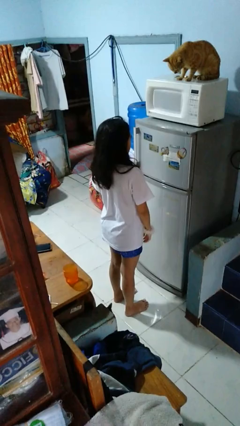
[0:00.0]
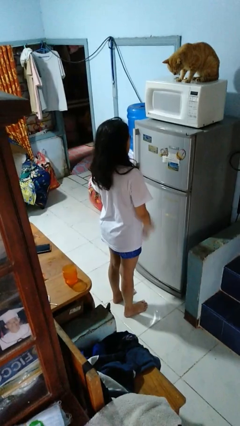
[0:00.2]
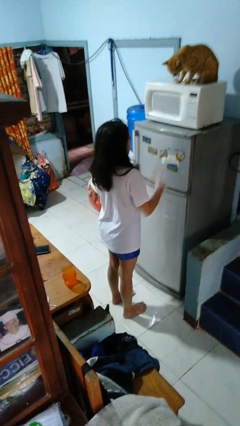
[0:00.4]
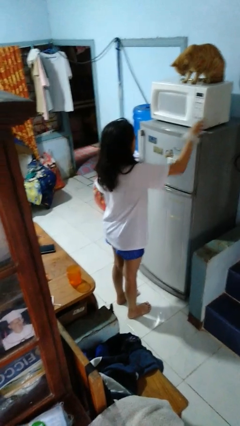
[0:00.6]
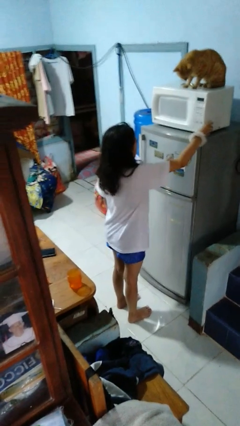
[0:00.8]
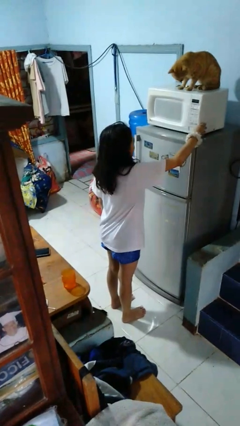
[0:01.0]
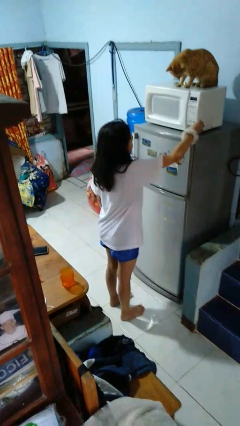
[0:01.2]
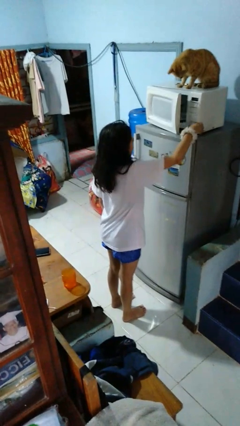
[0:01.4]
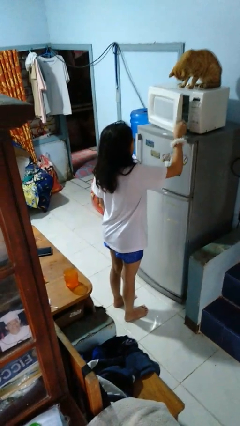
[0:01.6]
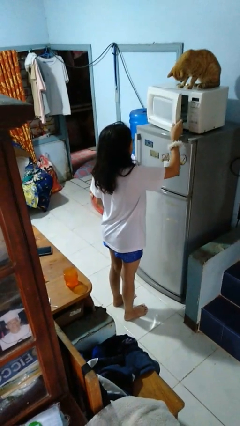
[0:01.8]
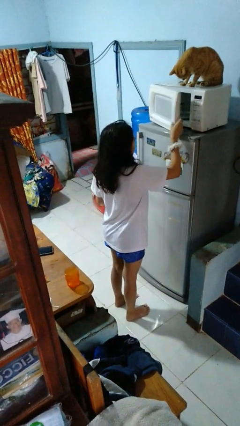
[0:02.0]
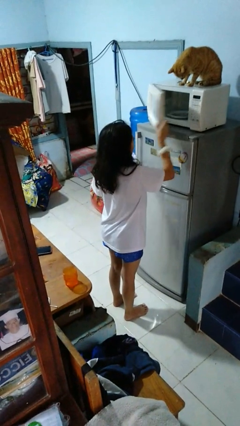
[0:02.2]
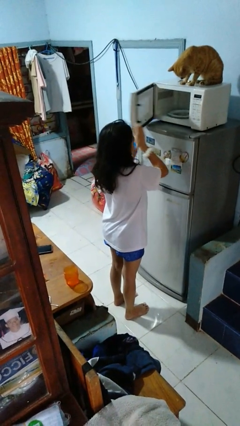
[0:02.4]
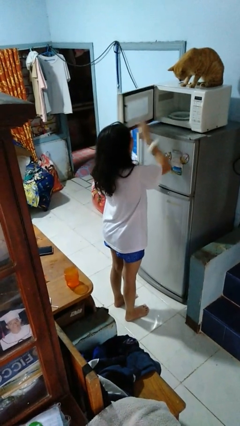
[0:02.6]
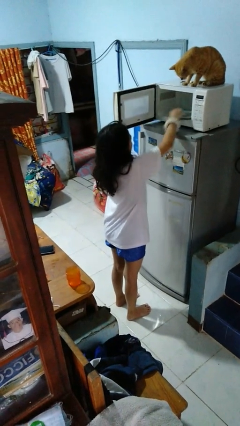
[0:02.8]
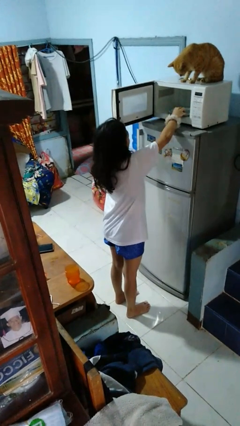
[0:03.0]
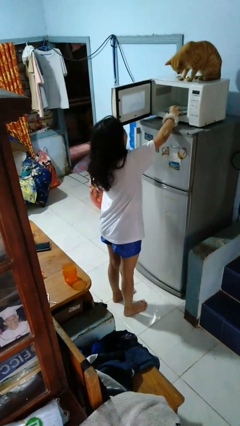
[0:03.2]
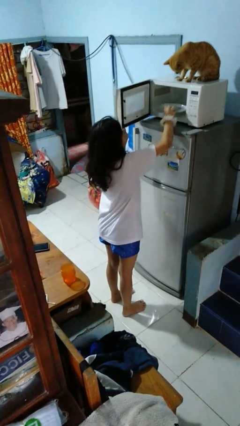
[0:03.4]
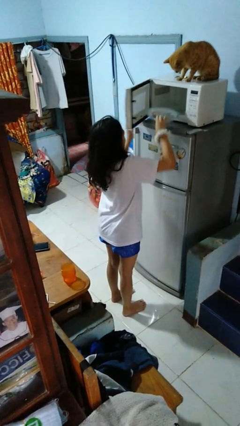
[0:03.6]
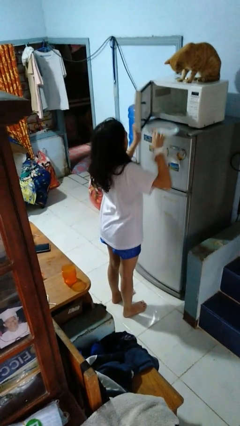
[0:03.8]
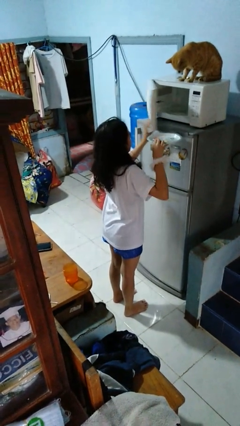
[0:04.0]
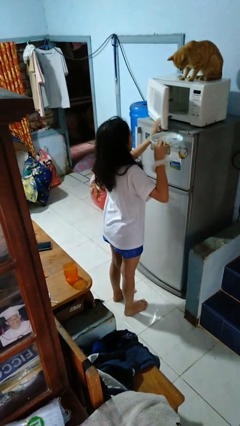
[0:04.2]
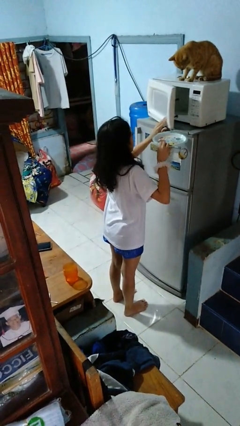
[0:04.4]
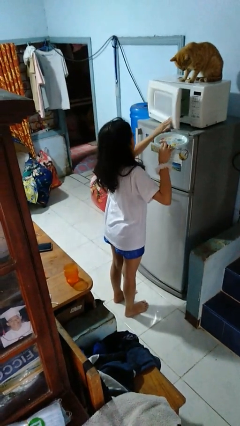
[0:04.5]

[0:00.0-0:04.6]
person takes object from microwave

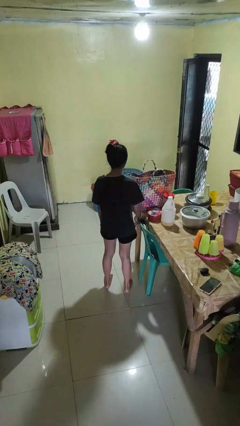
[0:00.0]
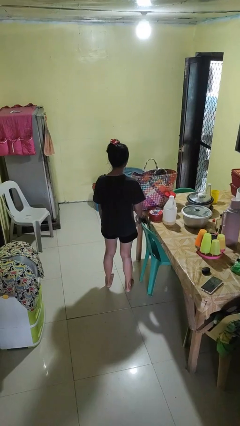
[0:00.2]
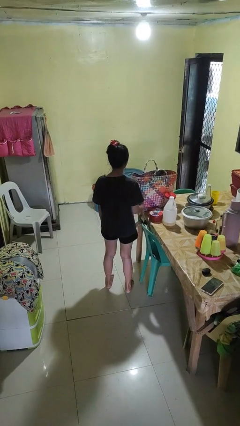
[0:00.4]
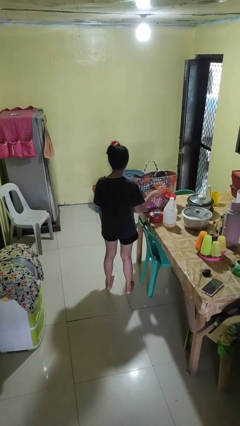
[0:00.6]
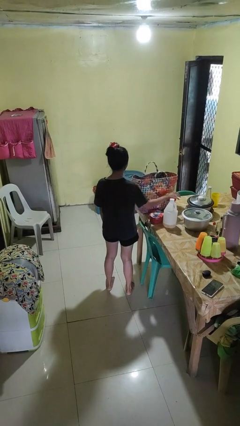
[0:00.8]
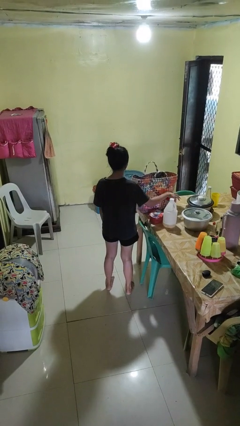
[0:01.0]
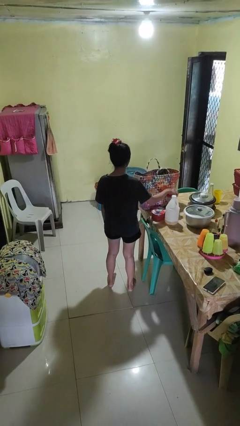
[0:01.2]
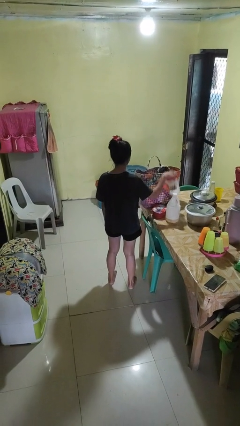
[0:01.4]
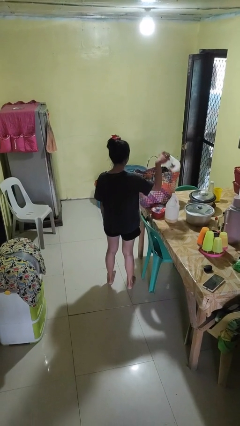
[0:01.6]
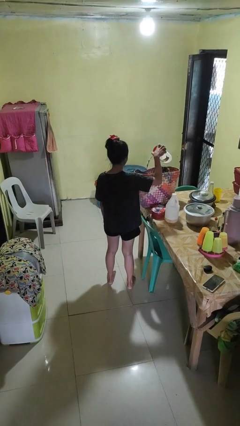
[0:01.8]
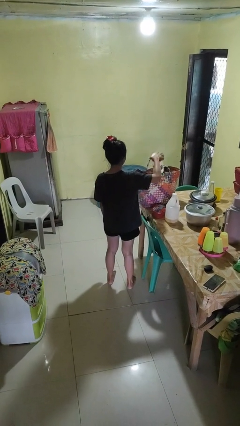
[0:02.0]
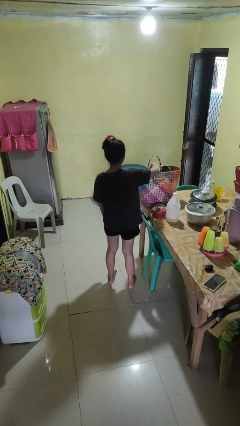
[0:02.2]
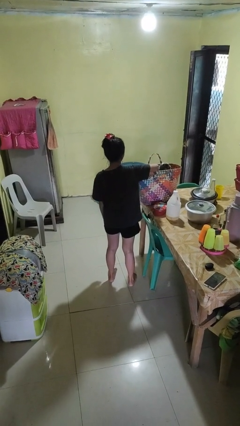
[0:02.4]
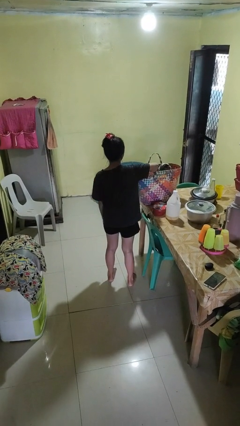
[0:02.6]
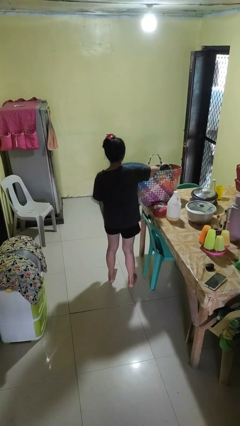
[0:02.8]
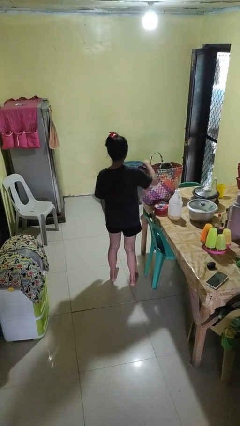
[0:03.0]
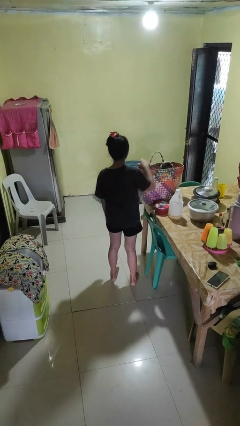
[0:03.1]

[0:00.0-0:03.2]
person puts object into basket

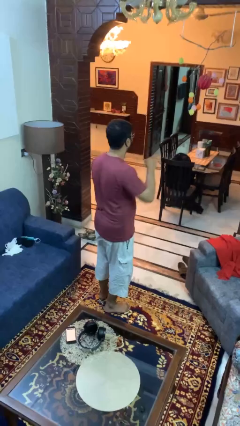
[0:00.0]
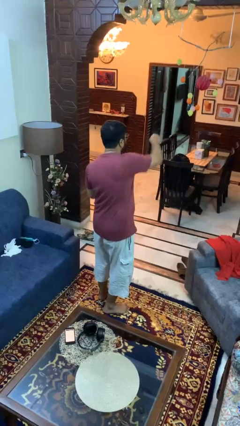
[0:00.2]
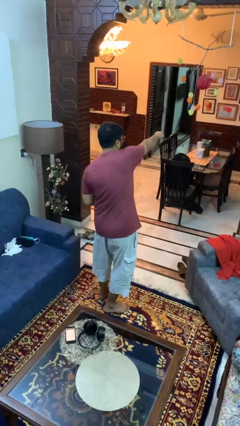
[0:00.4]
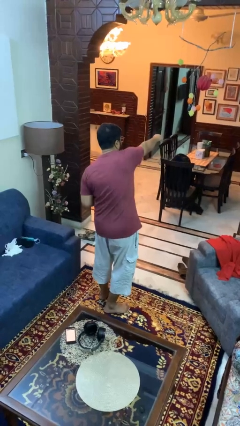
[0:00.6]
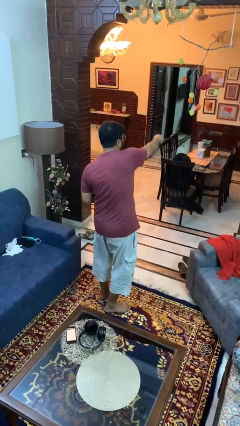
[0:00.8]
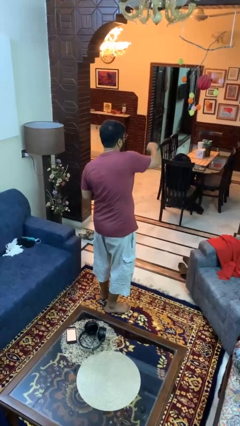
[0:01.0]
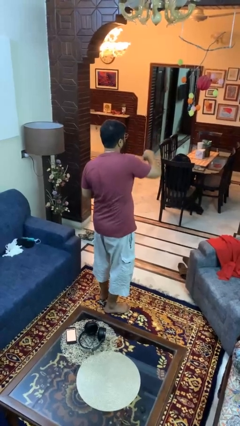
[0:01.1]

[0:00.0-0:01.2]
person karate chop

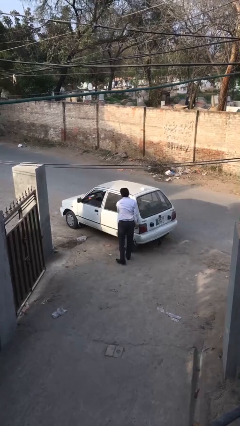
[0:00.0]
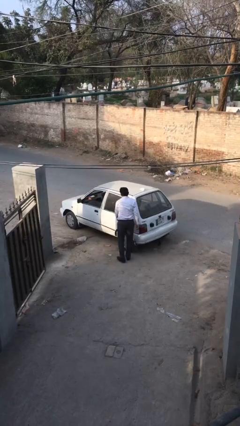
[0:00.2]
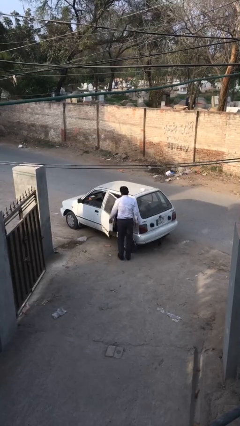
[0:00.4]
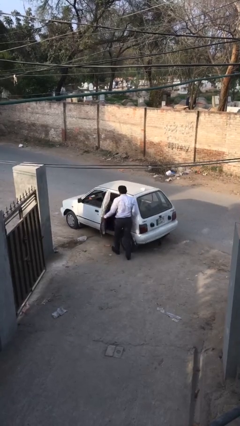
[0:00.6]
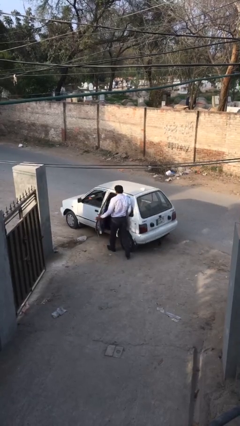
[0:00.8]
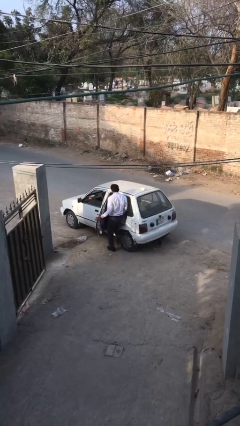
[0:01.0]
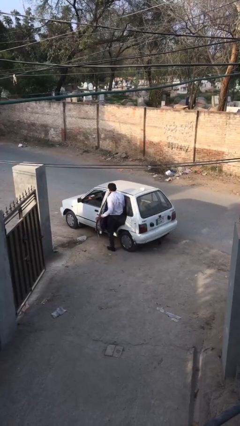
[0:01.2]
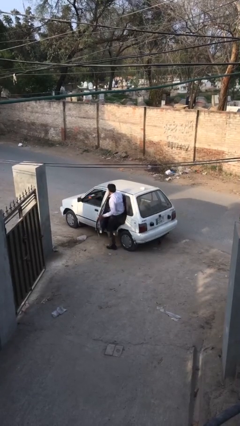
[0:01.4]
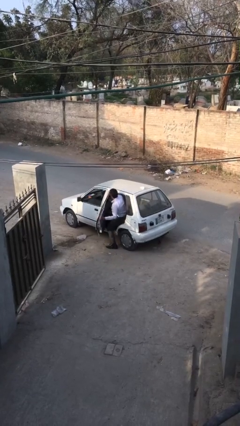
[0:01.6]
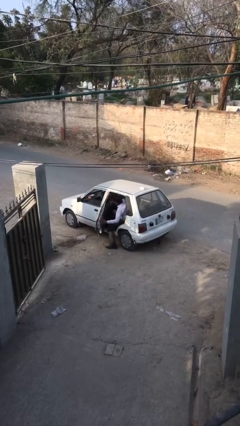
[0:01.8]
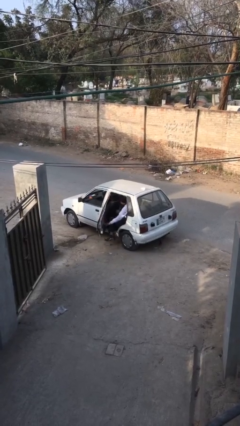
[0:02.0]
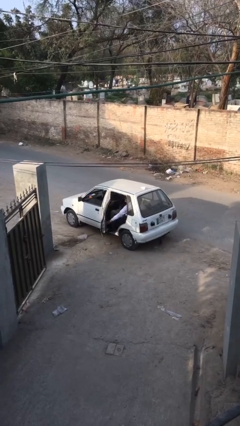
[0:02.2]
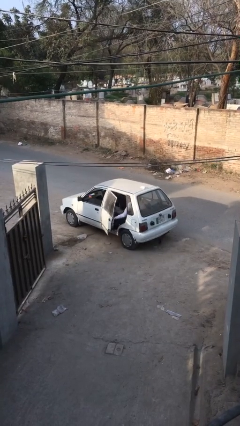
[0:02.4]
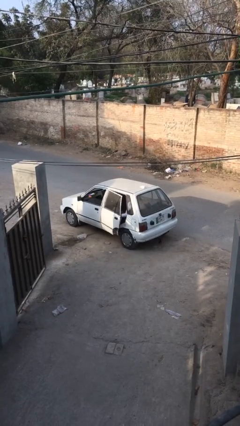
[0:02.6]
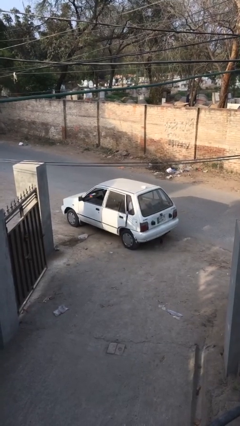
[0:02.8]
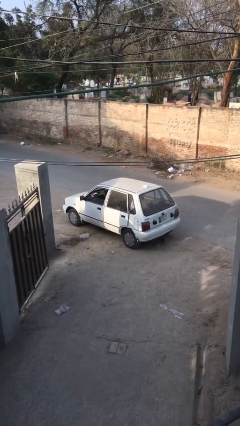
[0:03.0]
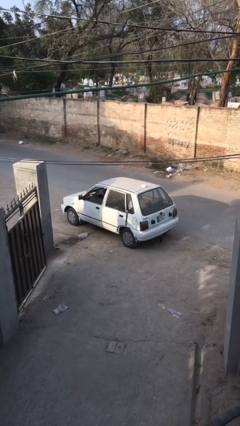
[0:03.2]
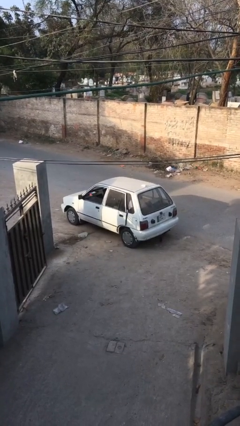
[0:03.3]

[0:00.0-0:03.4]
car picks up person

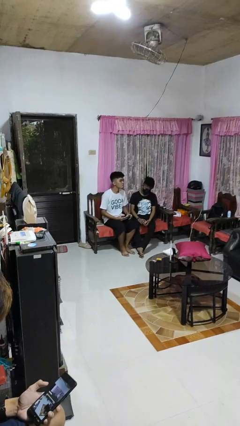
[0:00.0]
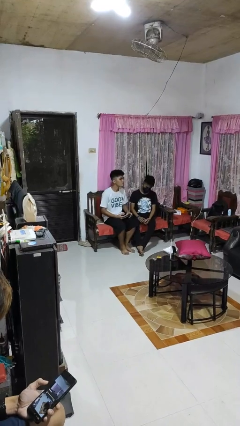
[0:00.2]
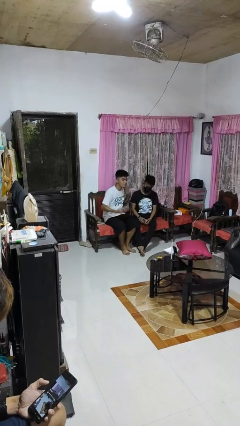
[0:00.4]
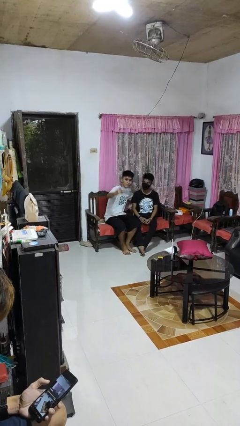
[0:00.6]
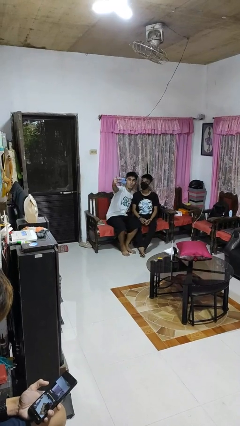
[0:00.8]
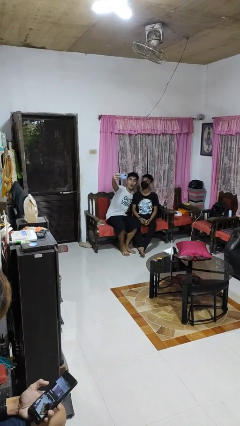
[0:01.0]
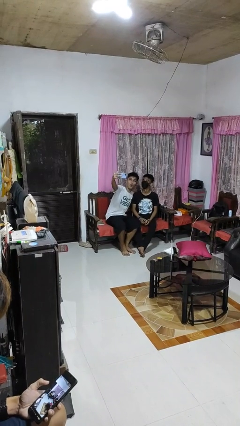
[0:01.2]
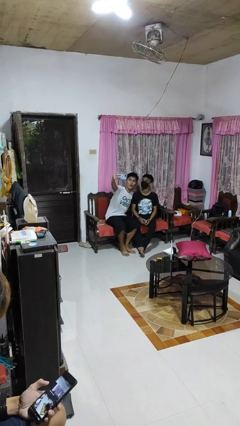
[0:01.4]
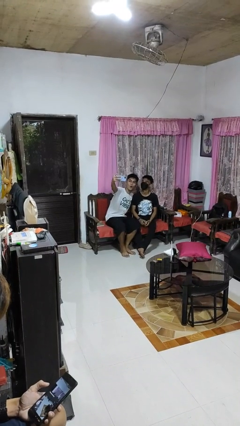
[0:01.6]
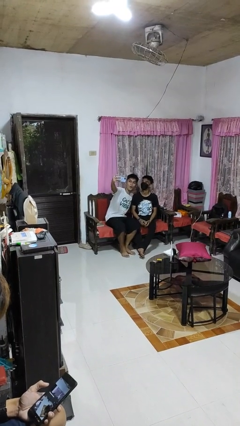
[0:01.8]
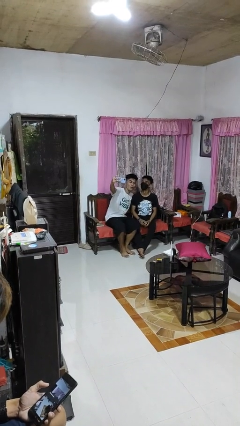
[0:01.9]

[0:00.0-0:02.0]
person takes selfie with person

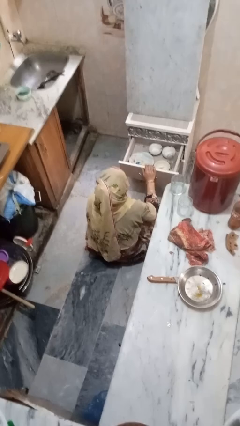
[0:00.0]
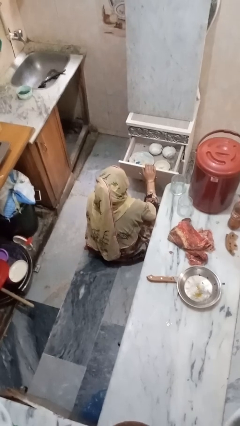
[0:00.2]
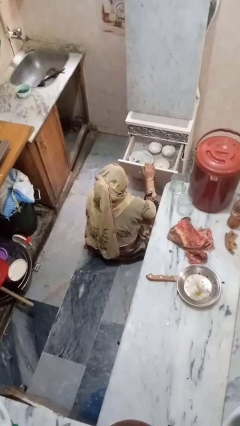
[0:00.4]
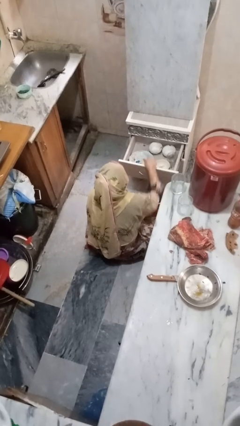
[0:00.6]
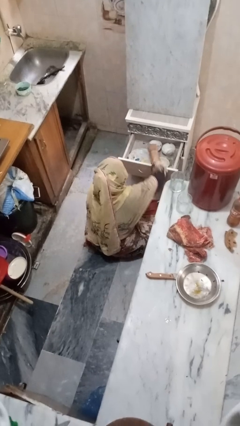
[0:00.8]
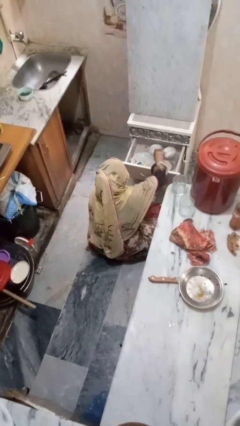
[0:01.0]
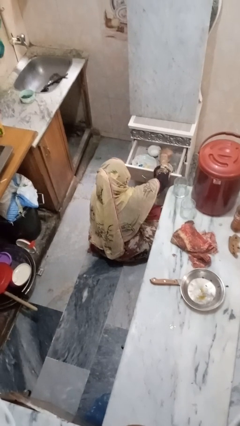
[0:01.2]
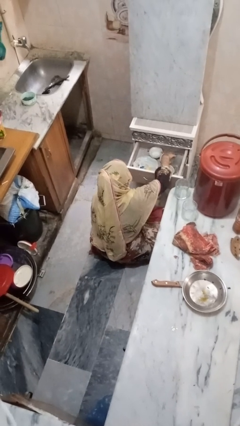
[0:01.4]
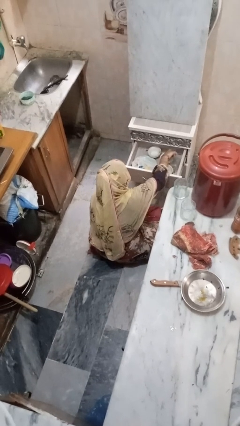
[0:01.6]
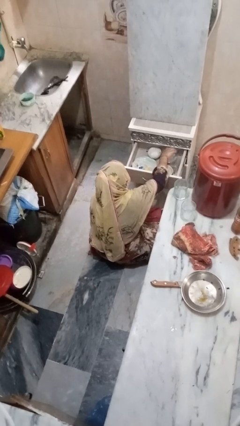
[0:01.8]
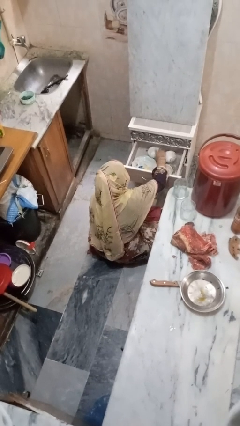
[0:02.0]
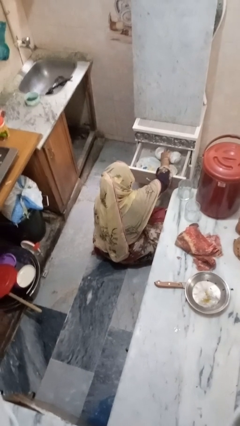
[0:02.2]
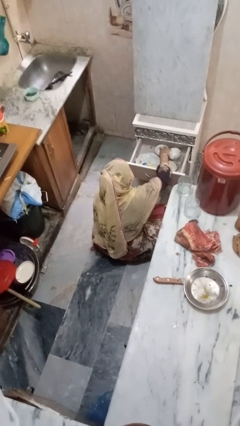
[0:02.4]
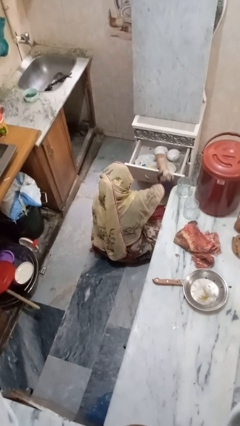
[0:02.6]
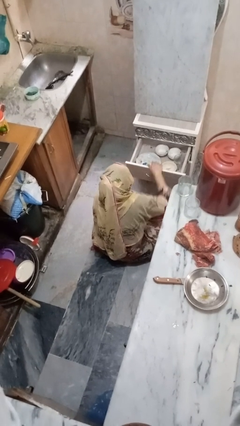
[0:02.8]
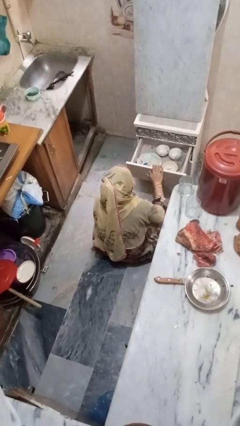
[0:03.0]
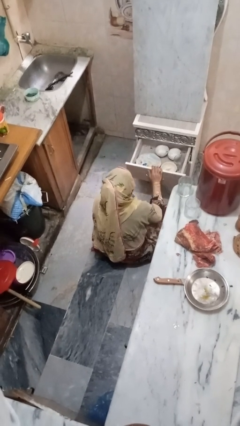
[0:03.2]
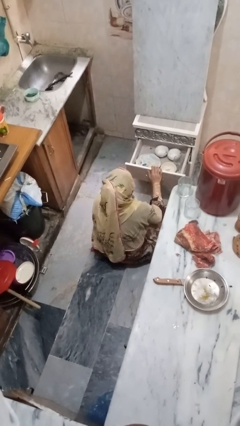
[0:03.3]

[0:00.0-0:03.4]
person searches in kitchen drawer
